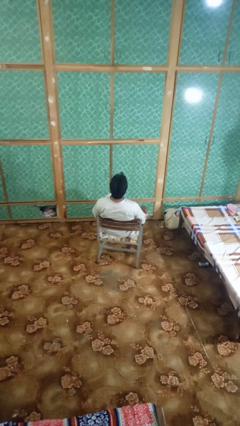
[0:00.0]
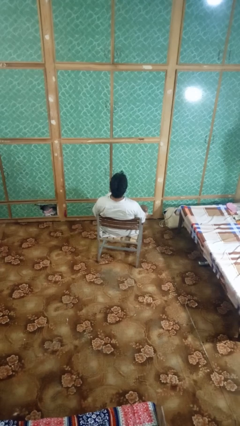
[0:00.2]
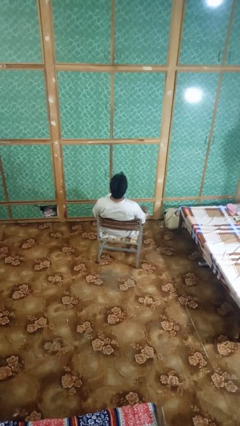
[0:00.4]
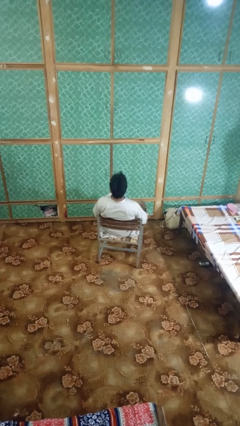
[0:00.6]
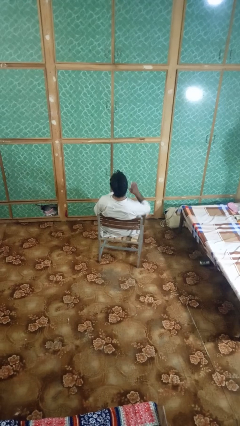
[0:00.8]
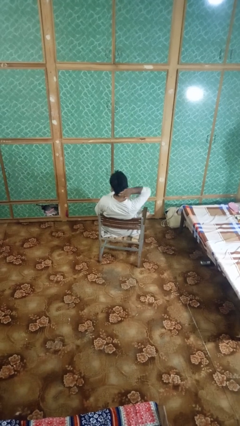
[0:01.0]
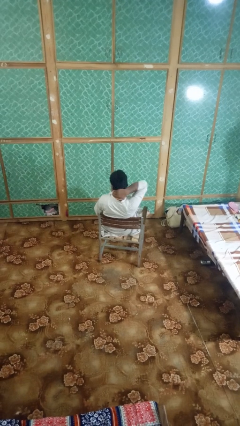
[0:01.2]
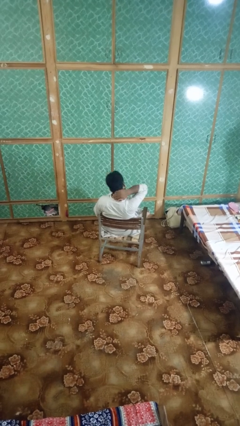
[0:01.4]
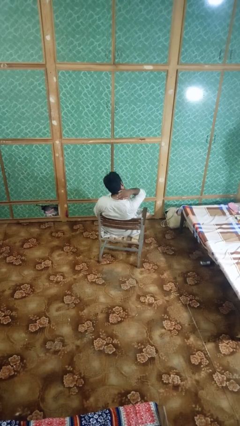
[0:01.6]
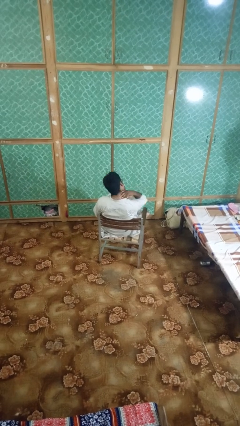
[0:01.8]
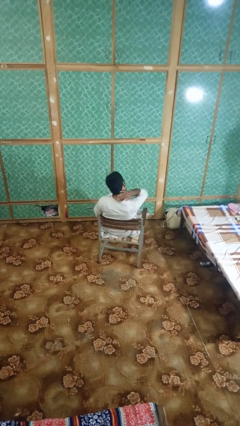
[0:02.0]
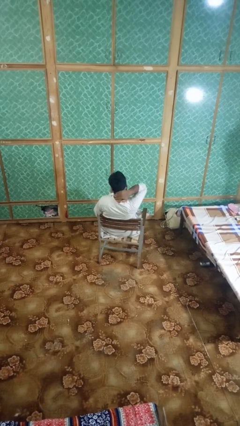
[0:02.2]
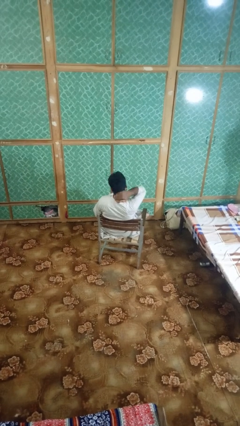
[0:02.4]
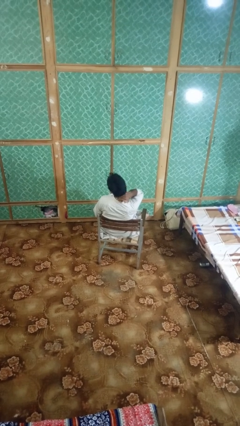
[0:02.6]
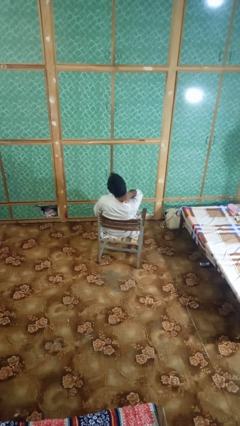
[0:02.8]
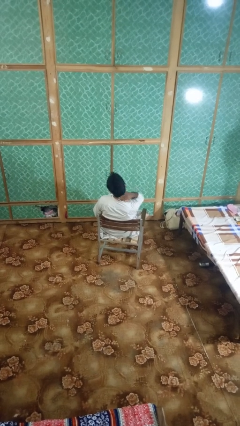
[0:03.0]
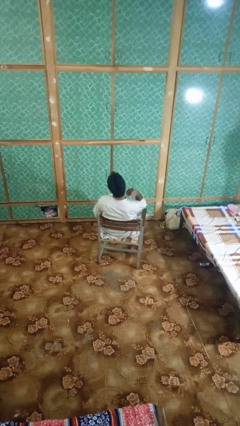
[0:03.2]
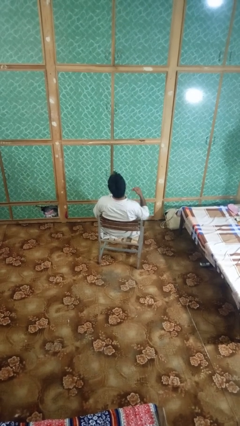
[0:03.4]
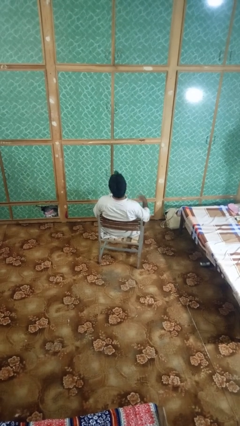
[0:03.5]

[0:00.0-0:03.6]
person rubs neck

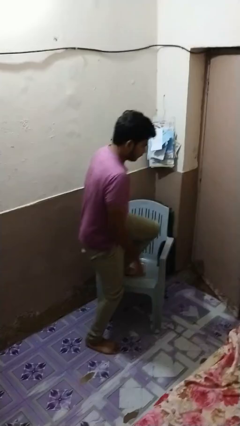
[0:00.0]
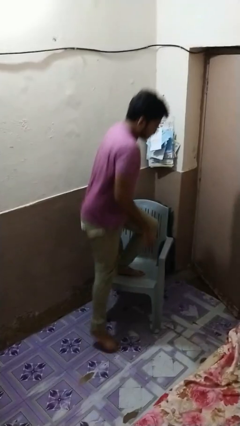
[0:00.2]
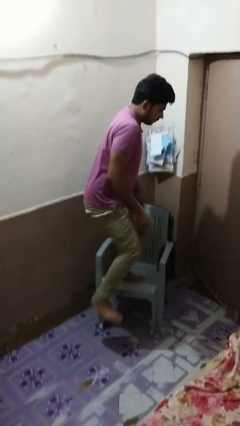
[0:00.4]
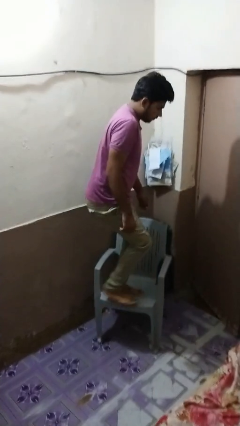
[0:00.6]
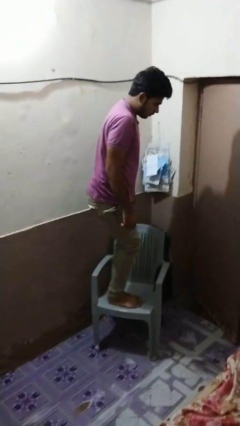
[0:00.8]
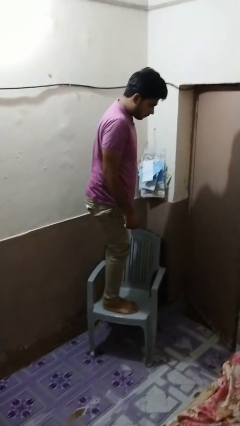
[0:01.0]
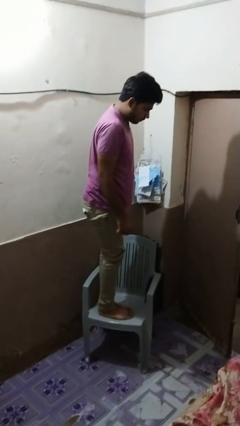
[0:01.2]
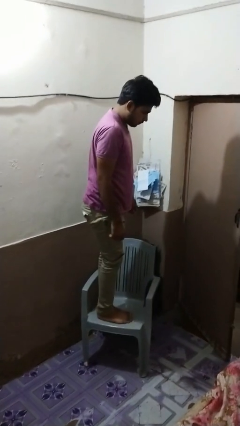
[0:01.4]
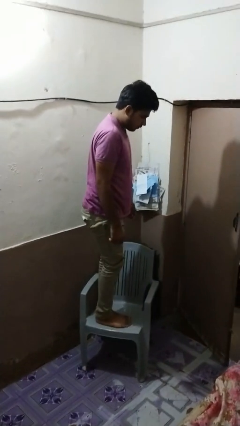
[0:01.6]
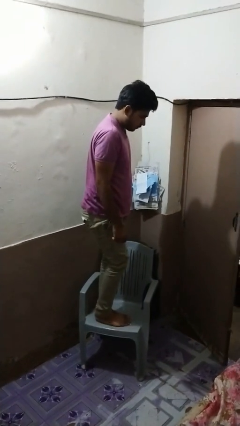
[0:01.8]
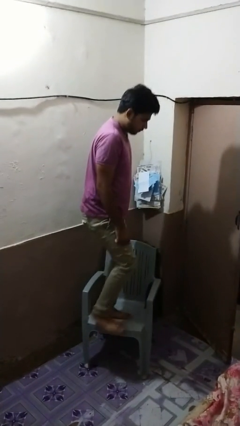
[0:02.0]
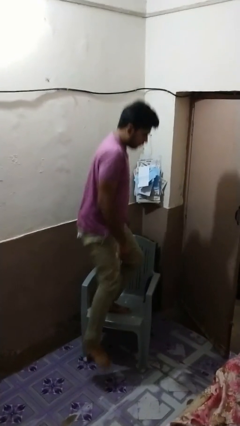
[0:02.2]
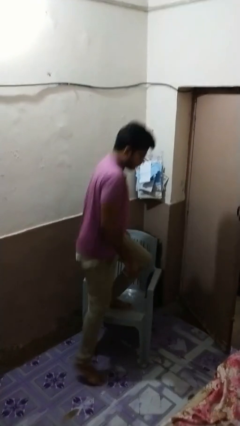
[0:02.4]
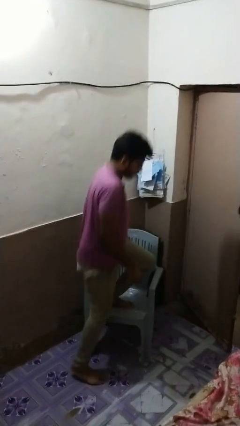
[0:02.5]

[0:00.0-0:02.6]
person climbs on chair

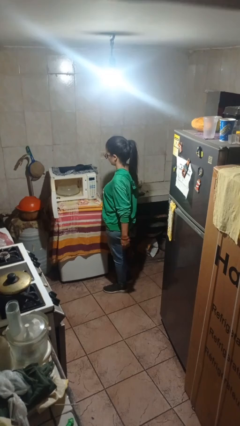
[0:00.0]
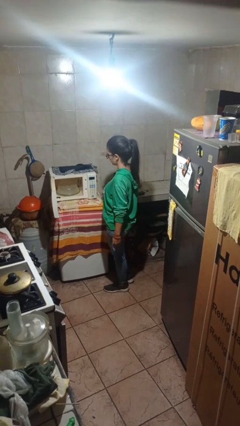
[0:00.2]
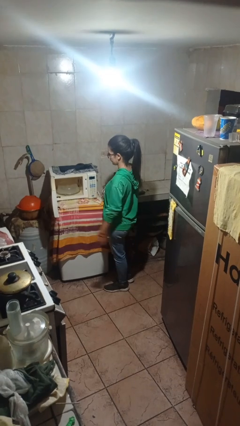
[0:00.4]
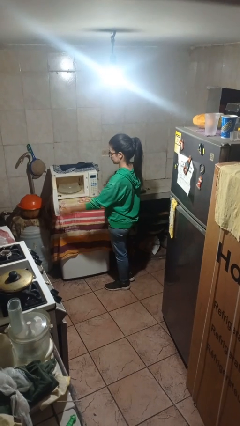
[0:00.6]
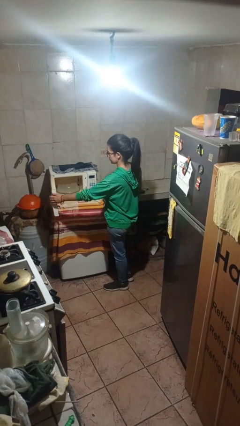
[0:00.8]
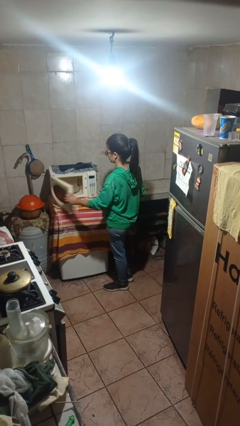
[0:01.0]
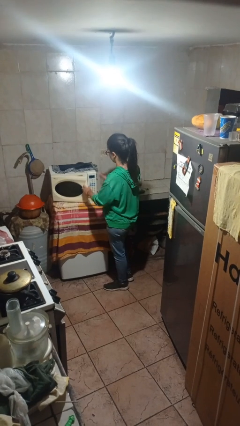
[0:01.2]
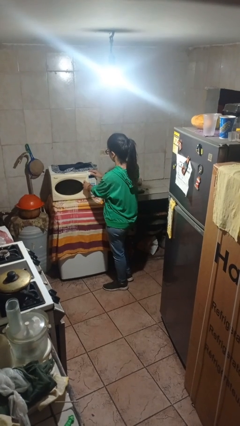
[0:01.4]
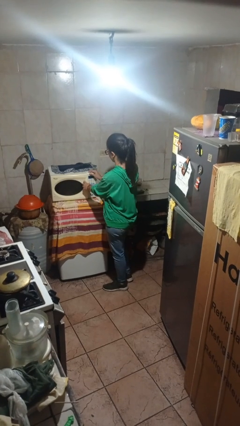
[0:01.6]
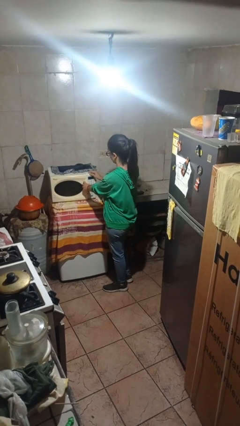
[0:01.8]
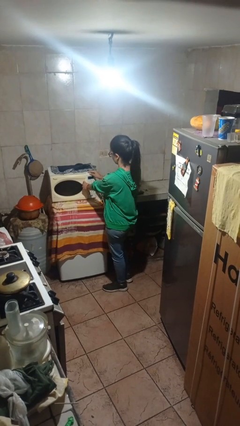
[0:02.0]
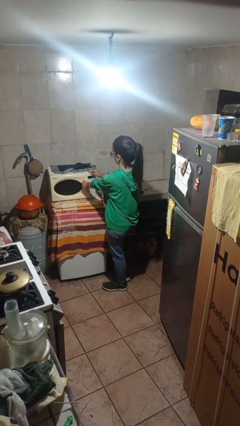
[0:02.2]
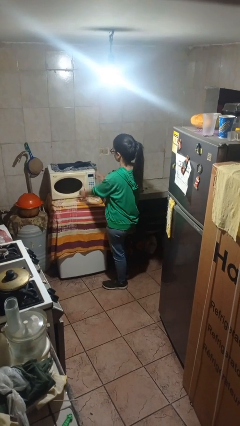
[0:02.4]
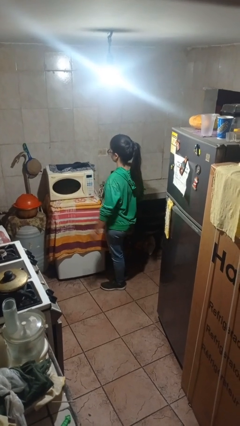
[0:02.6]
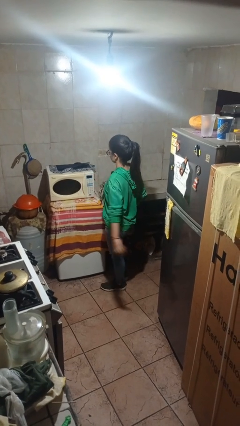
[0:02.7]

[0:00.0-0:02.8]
person closes microwave

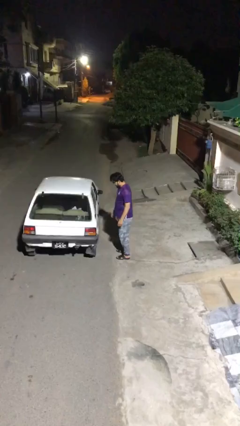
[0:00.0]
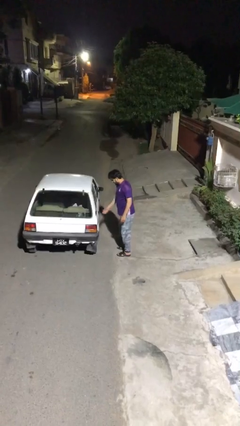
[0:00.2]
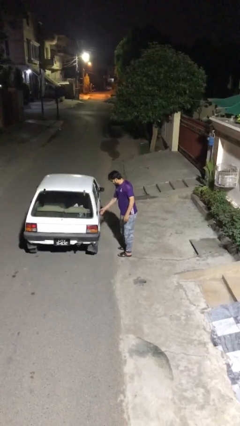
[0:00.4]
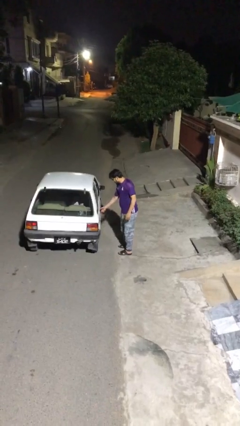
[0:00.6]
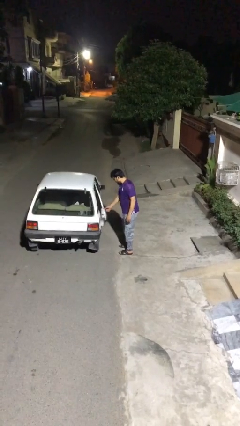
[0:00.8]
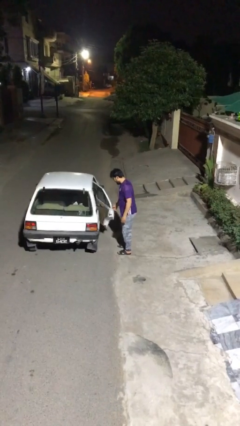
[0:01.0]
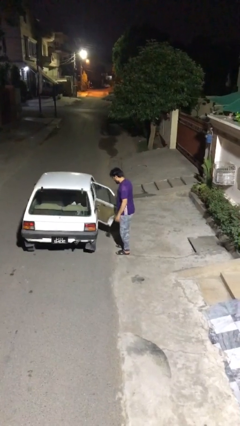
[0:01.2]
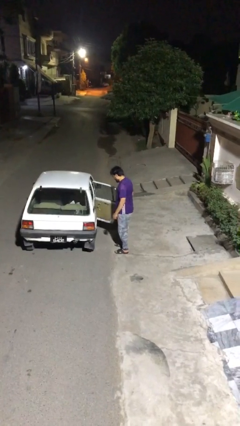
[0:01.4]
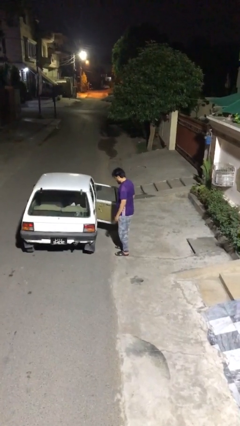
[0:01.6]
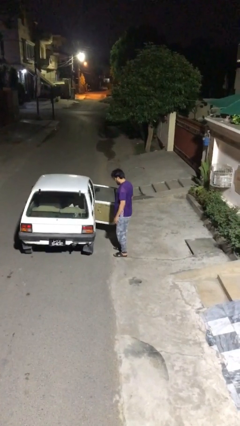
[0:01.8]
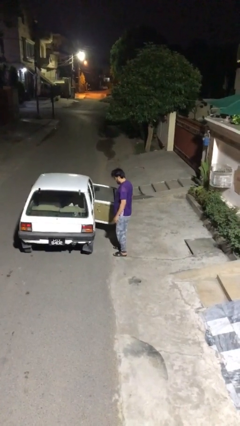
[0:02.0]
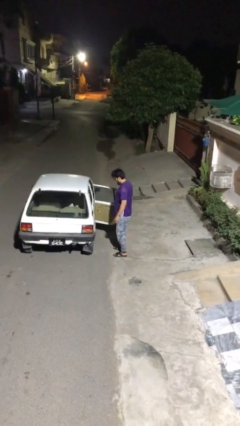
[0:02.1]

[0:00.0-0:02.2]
person opens car door

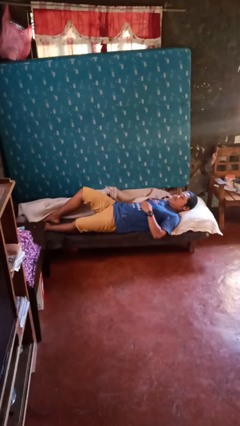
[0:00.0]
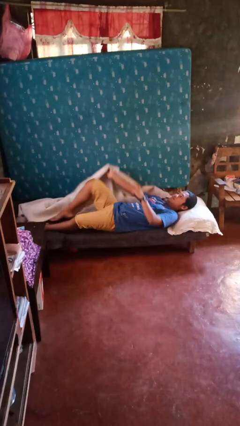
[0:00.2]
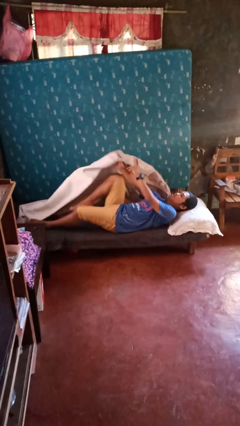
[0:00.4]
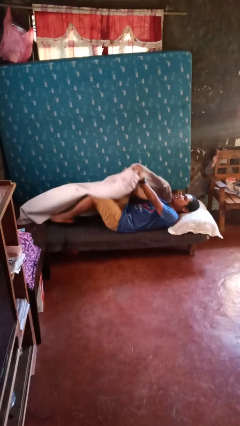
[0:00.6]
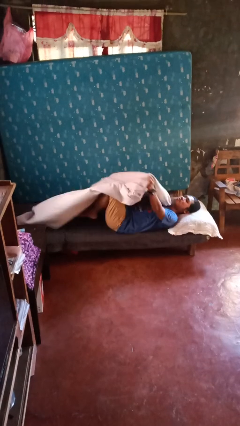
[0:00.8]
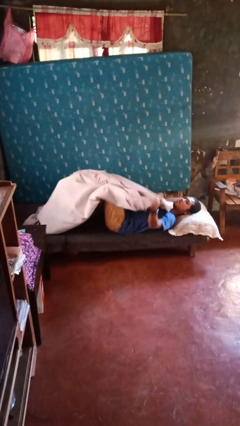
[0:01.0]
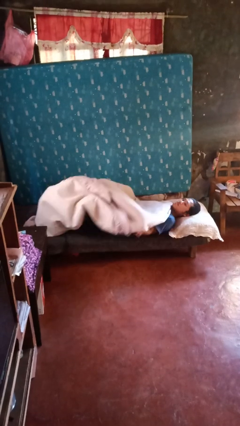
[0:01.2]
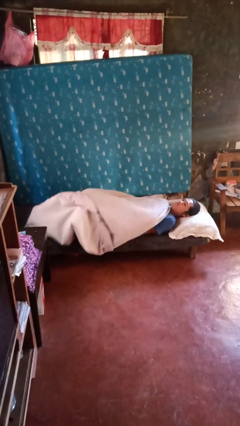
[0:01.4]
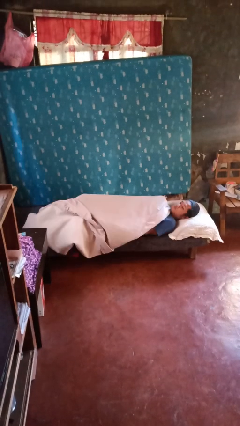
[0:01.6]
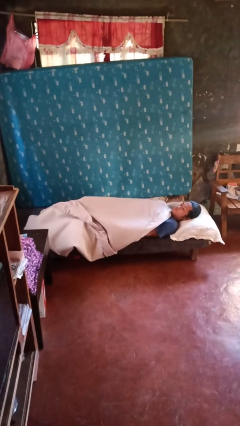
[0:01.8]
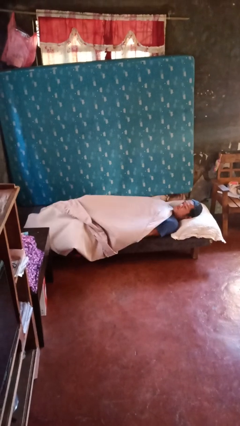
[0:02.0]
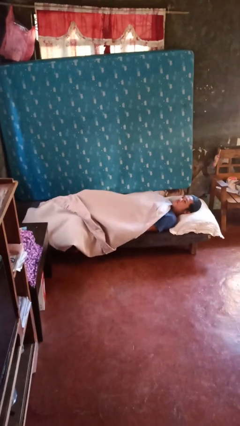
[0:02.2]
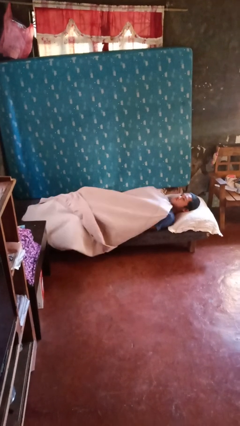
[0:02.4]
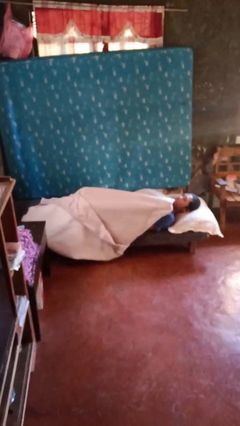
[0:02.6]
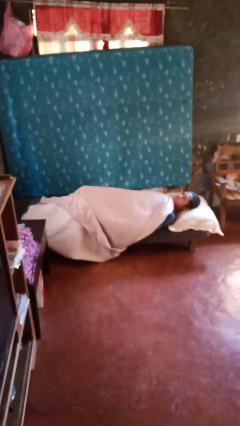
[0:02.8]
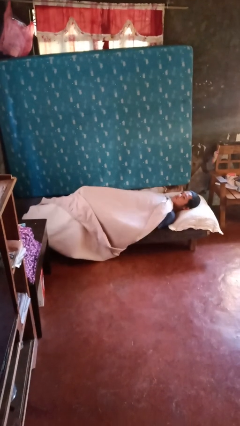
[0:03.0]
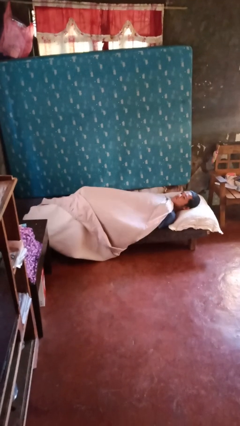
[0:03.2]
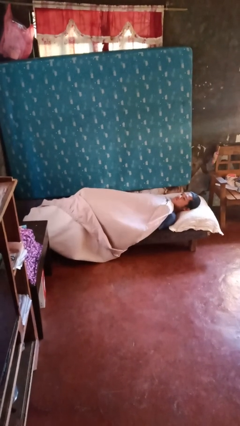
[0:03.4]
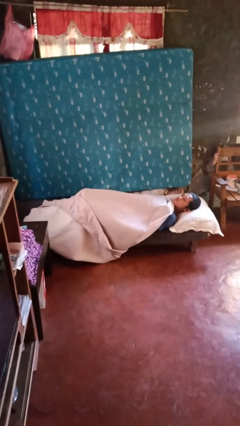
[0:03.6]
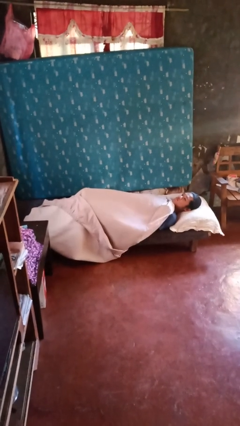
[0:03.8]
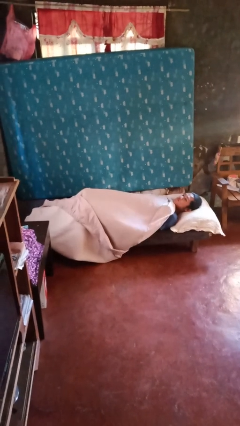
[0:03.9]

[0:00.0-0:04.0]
person covers with bedsheets

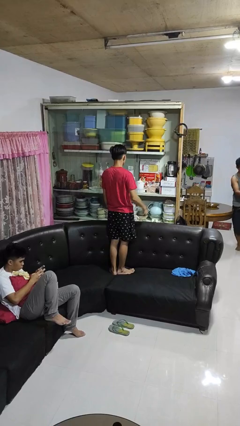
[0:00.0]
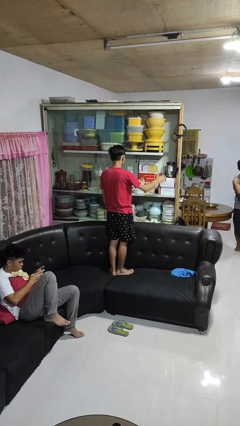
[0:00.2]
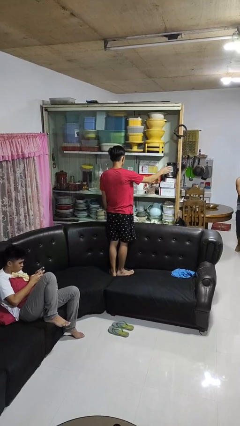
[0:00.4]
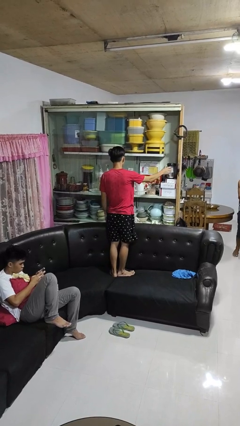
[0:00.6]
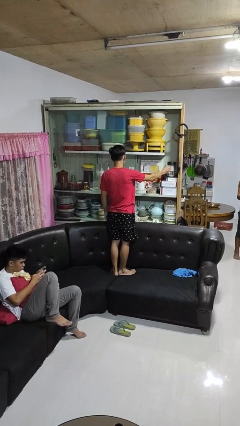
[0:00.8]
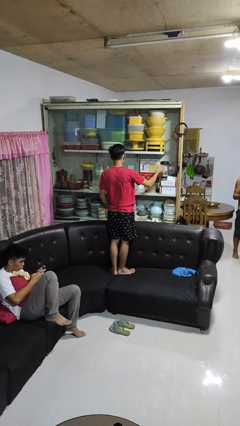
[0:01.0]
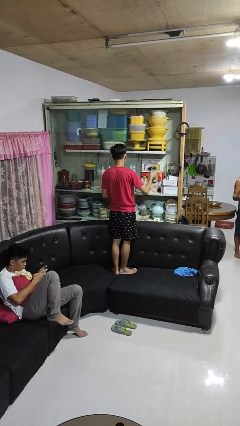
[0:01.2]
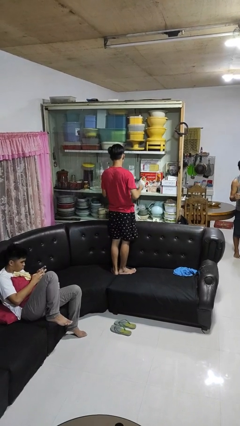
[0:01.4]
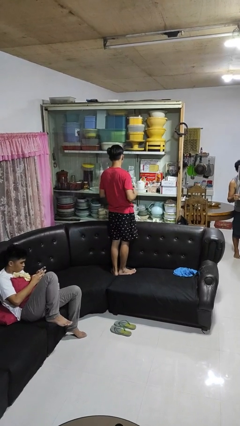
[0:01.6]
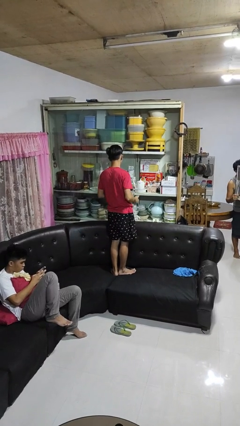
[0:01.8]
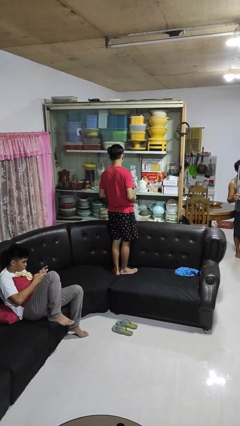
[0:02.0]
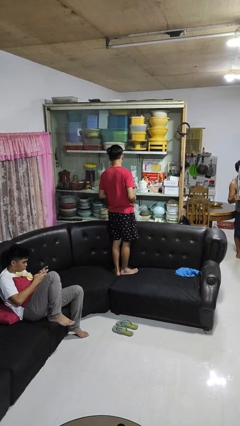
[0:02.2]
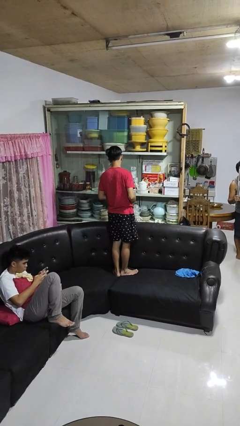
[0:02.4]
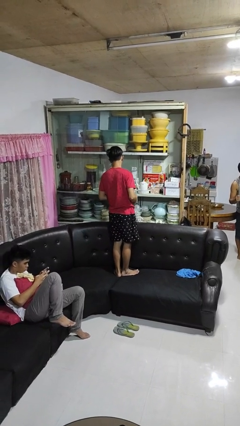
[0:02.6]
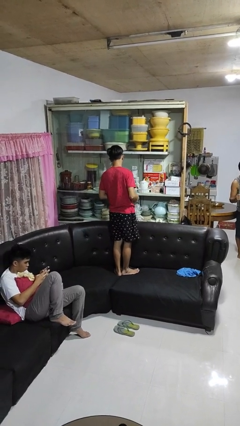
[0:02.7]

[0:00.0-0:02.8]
person picks up object from cabinet
